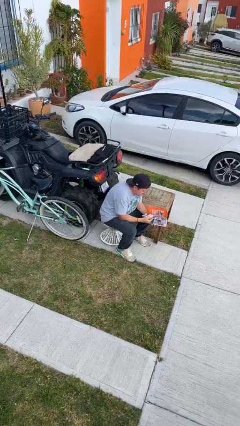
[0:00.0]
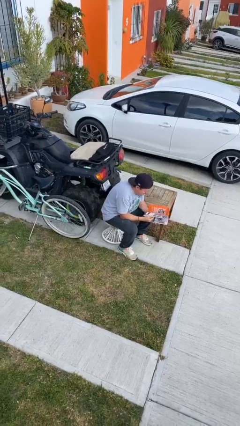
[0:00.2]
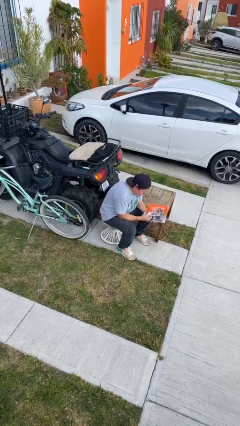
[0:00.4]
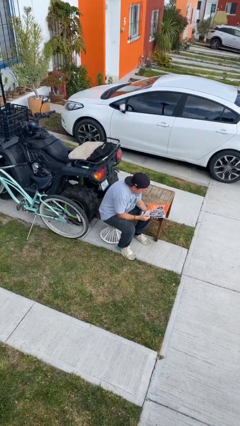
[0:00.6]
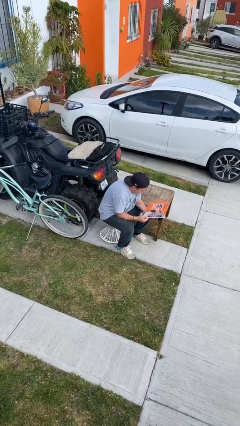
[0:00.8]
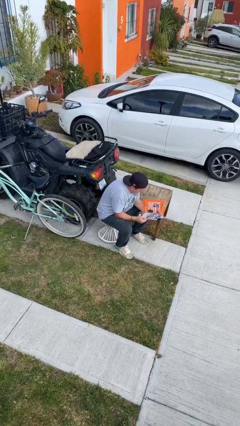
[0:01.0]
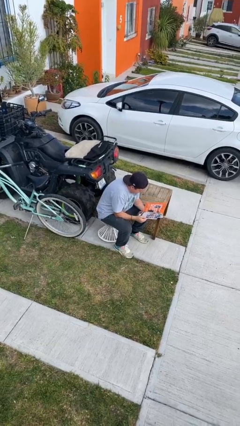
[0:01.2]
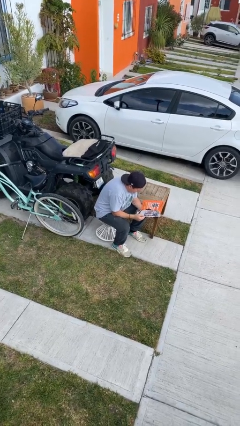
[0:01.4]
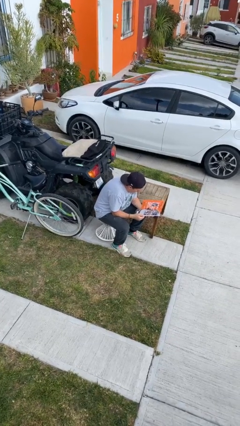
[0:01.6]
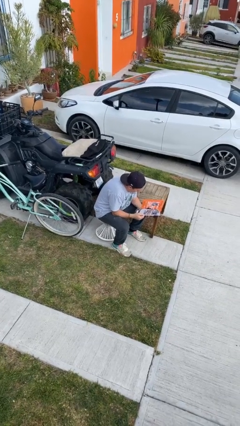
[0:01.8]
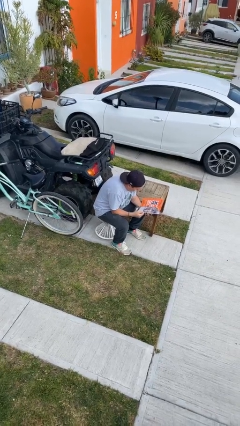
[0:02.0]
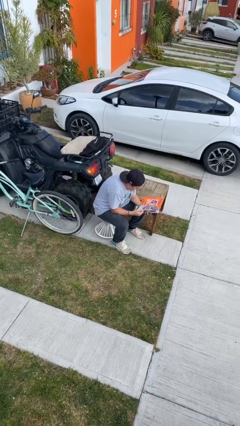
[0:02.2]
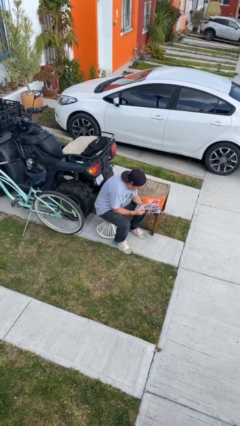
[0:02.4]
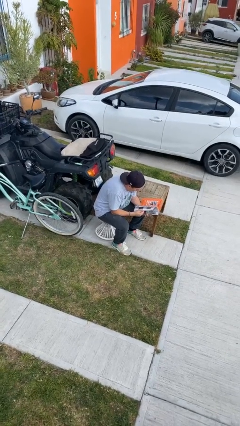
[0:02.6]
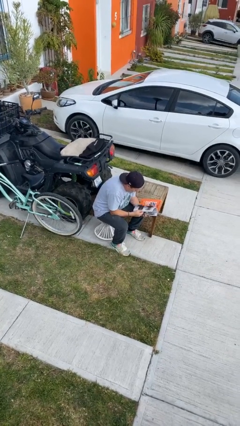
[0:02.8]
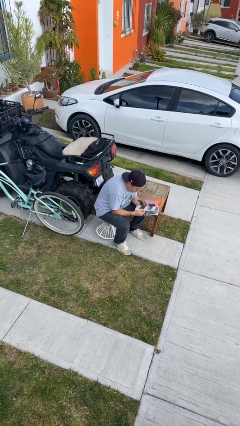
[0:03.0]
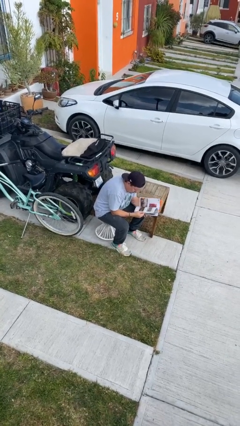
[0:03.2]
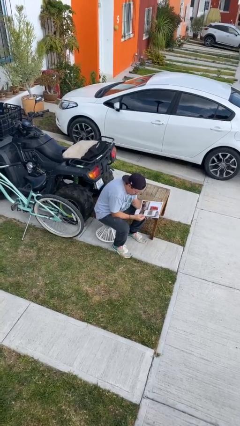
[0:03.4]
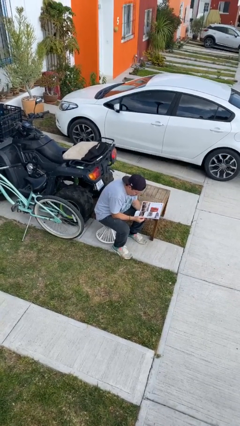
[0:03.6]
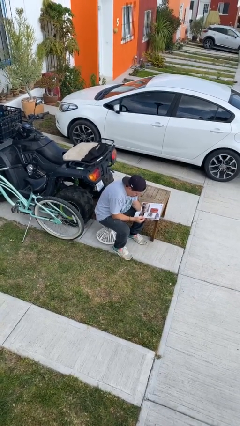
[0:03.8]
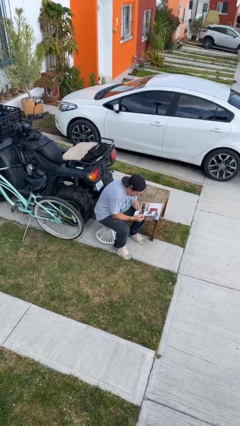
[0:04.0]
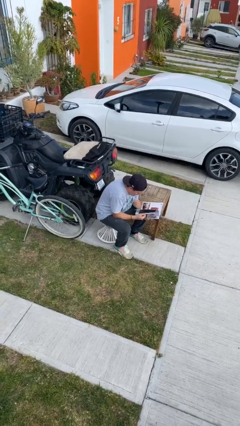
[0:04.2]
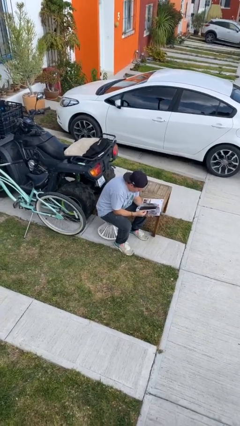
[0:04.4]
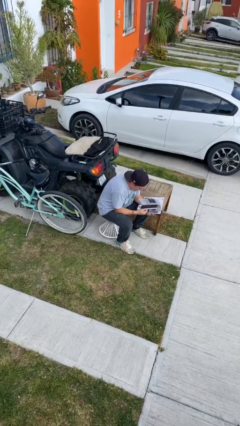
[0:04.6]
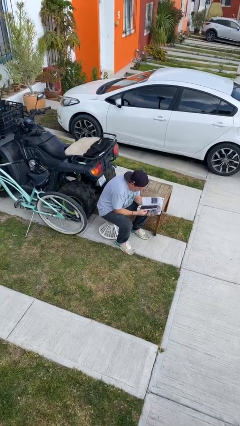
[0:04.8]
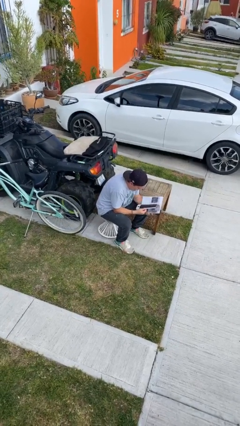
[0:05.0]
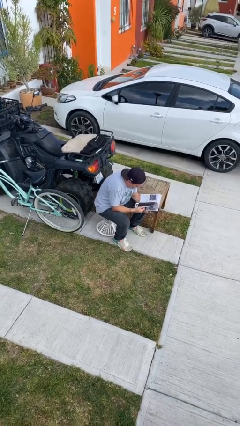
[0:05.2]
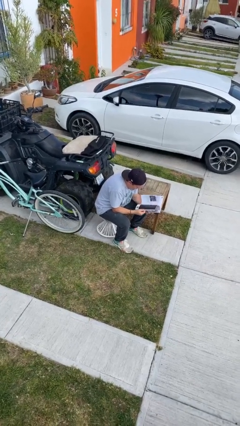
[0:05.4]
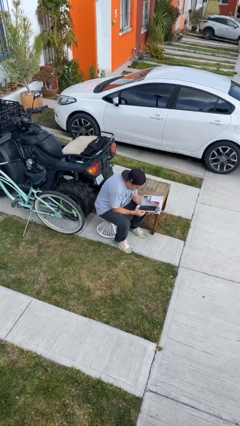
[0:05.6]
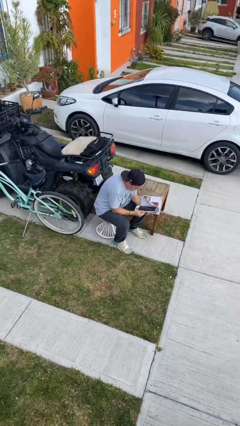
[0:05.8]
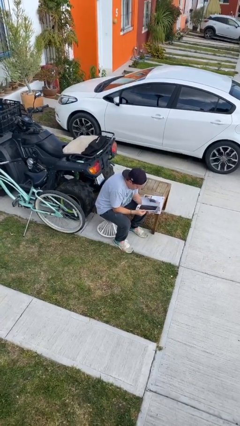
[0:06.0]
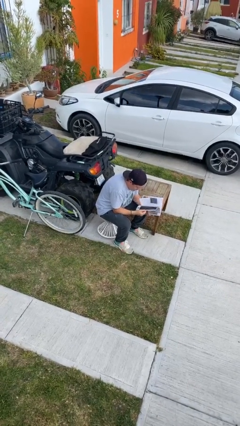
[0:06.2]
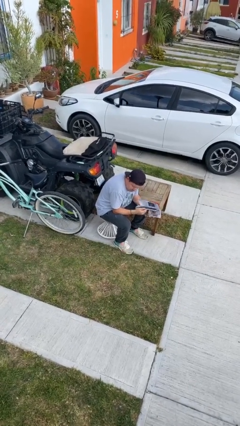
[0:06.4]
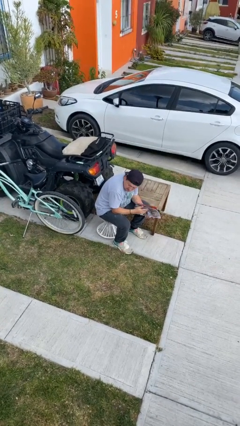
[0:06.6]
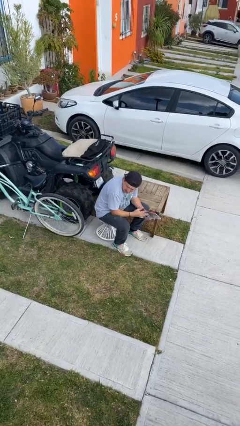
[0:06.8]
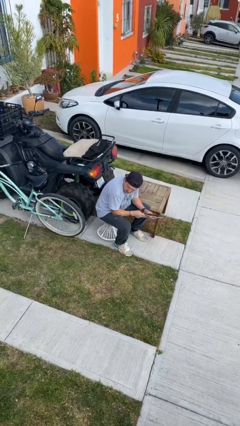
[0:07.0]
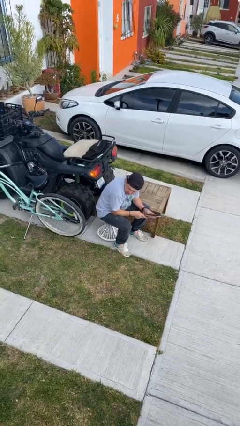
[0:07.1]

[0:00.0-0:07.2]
person reads document

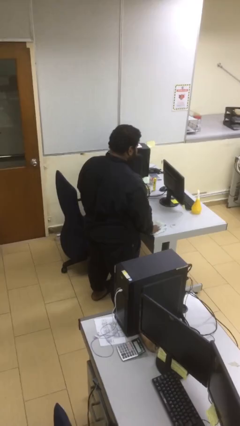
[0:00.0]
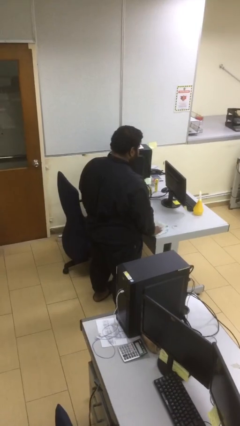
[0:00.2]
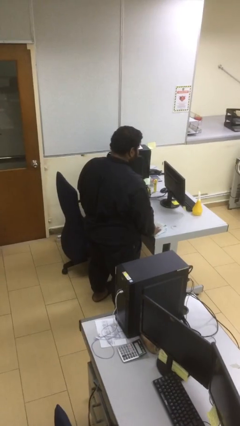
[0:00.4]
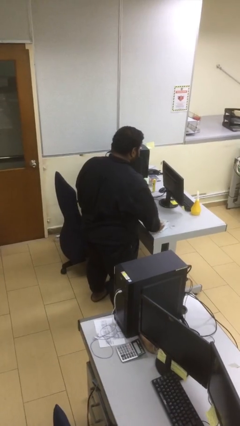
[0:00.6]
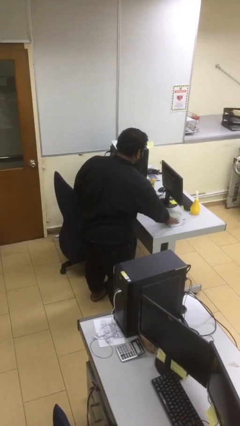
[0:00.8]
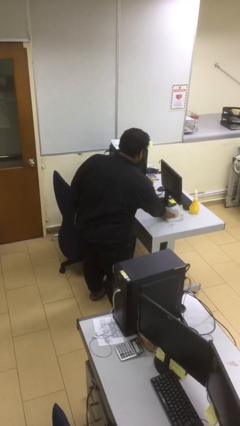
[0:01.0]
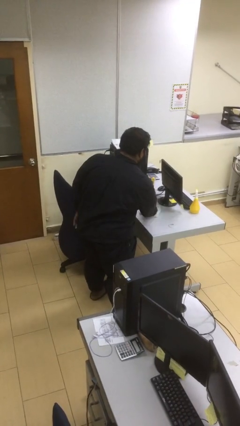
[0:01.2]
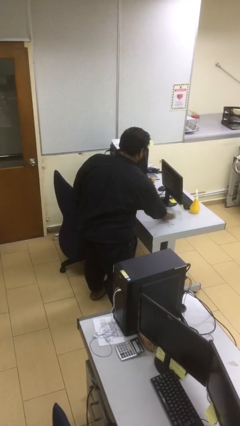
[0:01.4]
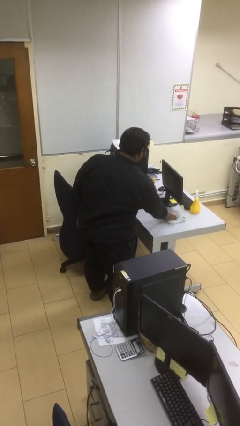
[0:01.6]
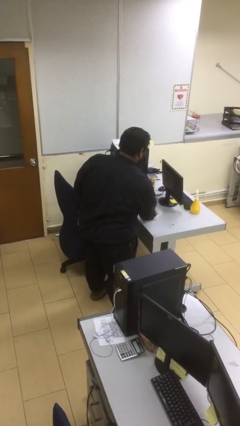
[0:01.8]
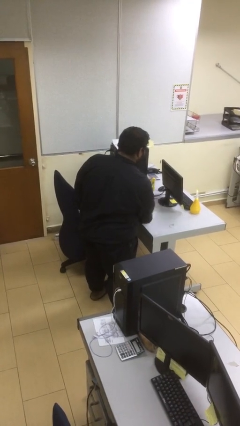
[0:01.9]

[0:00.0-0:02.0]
person cleans table with rag

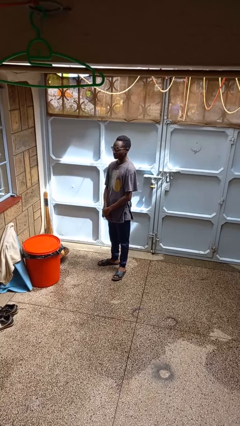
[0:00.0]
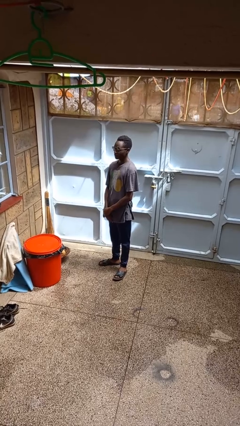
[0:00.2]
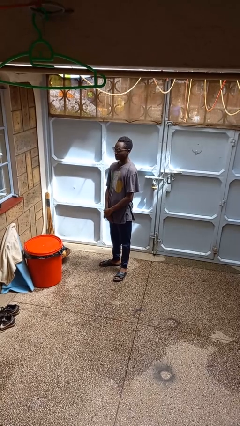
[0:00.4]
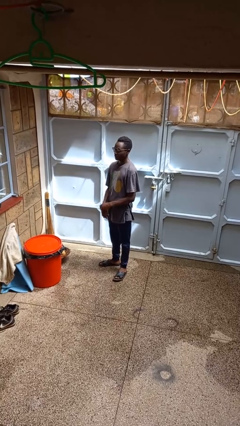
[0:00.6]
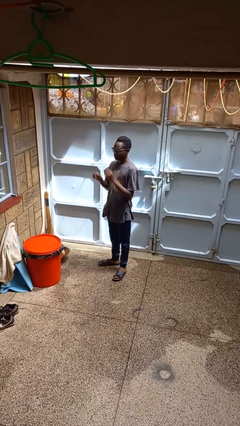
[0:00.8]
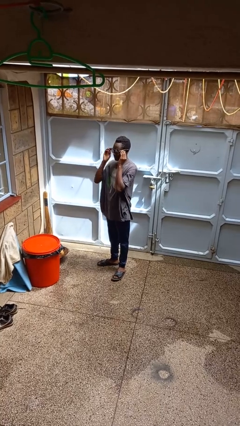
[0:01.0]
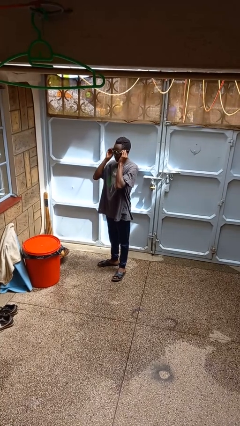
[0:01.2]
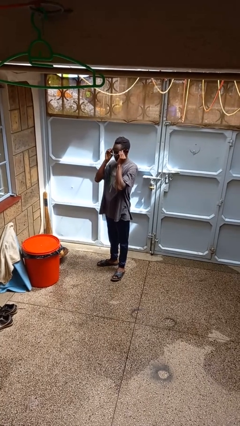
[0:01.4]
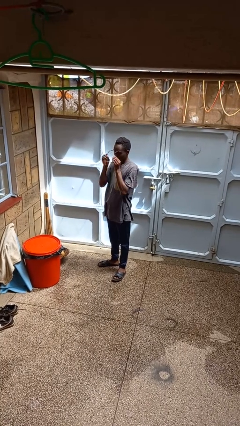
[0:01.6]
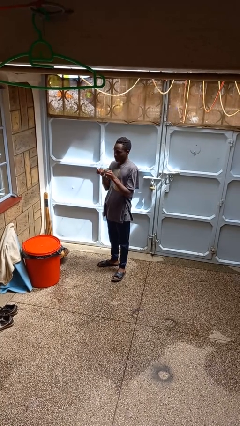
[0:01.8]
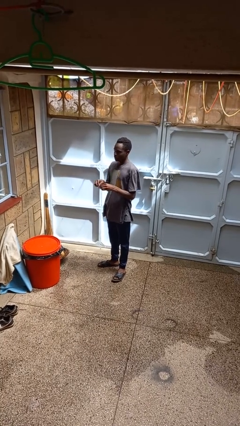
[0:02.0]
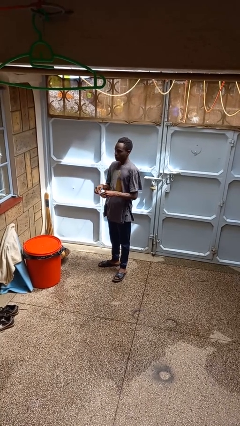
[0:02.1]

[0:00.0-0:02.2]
person takes off glasses

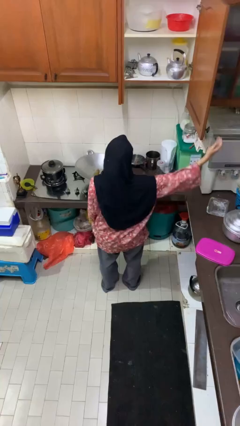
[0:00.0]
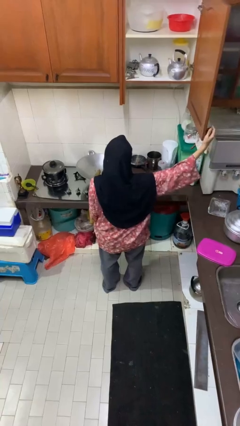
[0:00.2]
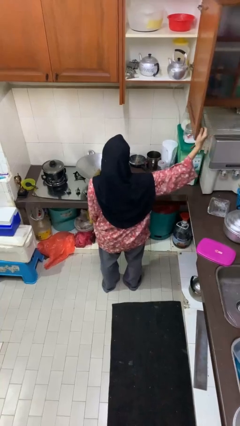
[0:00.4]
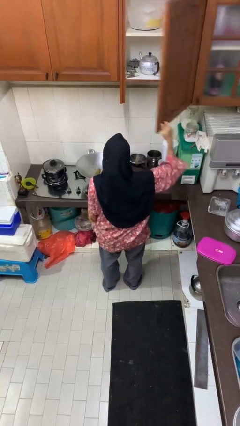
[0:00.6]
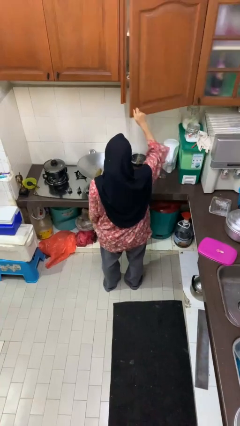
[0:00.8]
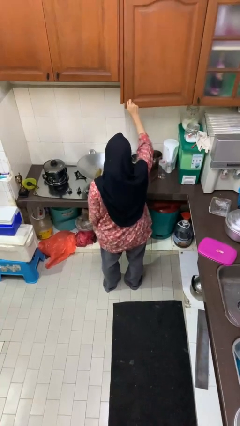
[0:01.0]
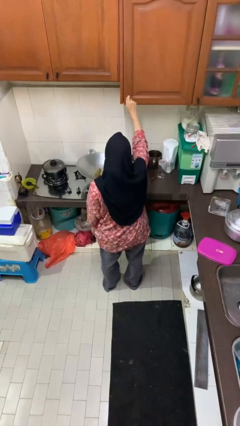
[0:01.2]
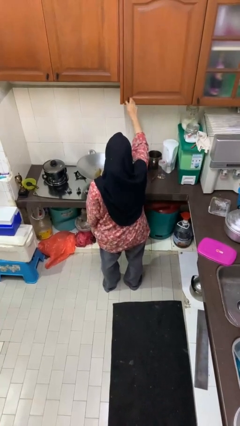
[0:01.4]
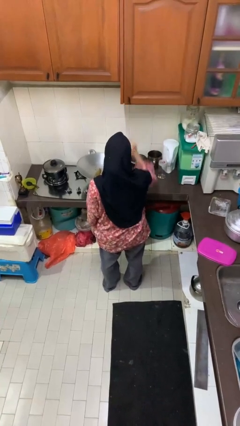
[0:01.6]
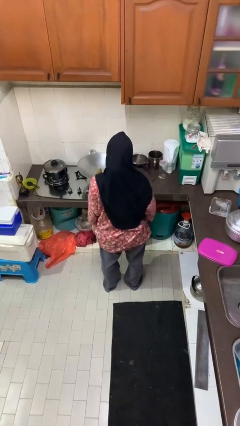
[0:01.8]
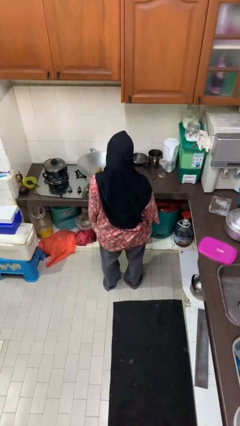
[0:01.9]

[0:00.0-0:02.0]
person closes cabinet

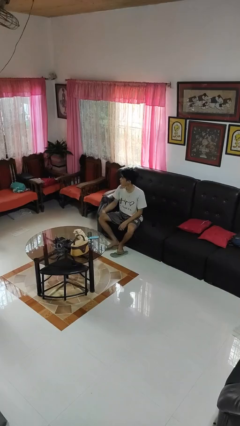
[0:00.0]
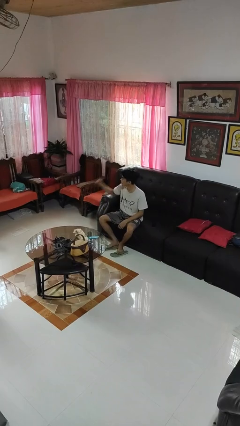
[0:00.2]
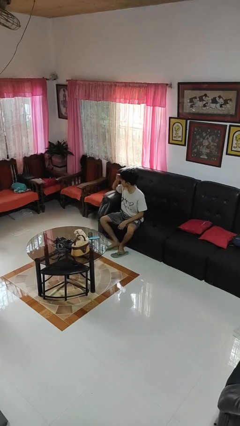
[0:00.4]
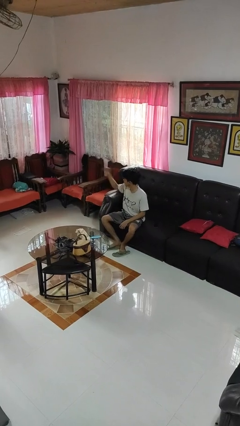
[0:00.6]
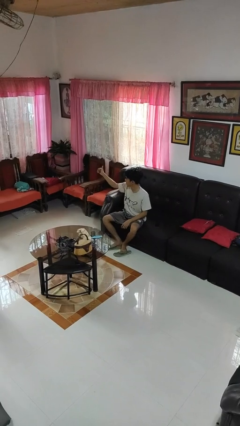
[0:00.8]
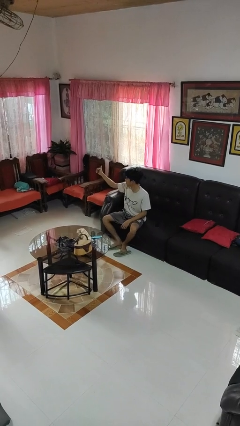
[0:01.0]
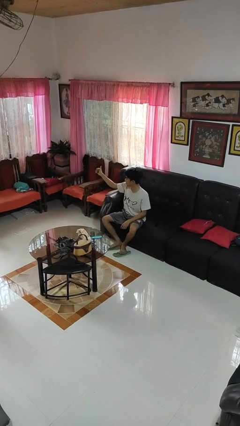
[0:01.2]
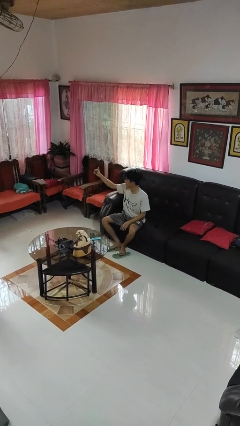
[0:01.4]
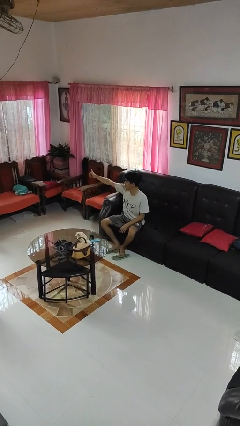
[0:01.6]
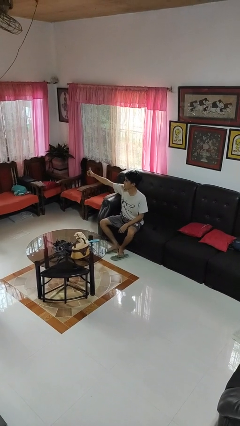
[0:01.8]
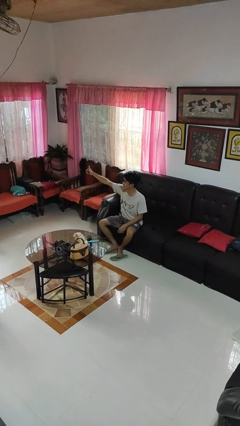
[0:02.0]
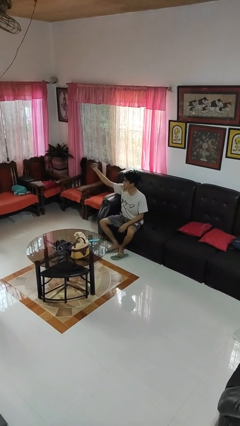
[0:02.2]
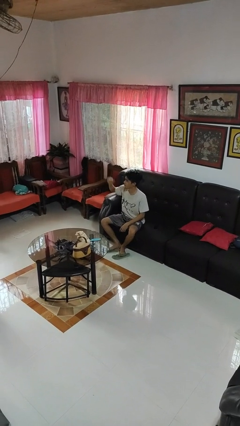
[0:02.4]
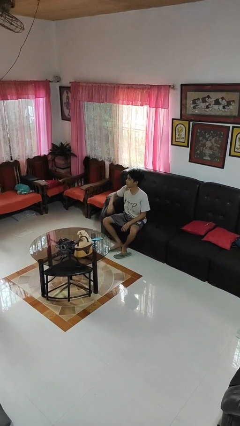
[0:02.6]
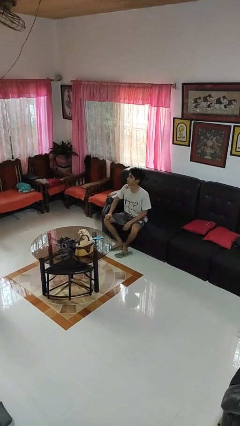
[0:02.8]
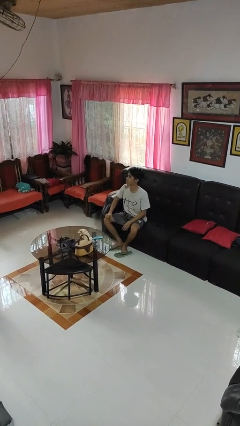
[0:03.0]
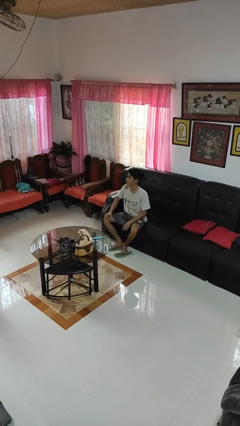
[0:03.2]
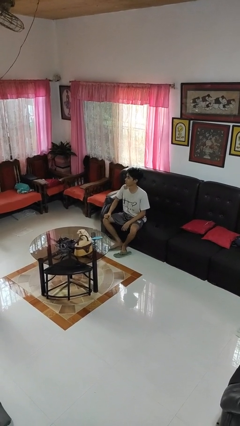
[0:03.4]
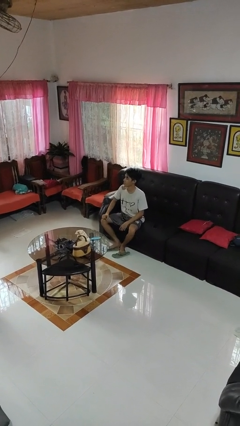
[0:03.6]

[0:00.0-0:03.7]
person gestures thumbs up

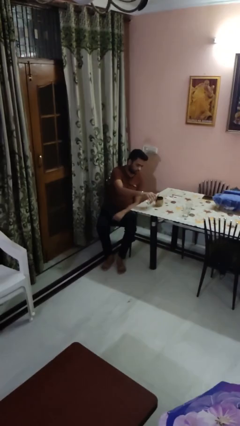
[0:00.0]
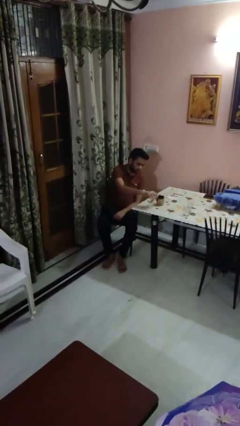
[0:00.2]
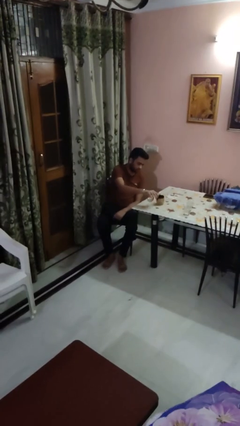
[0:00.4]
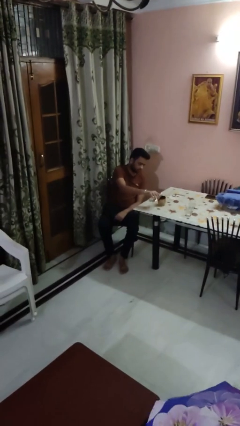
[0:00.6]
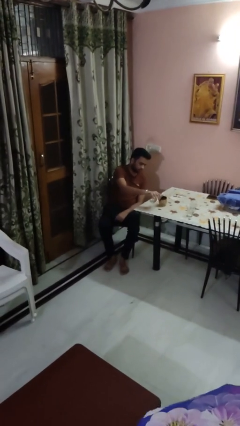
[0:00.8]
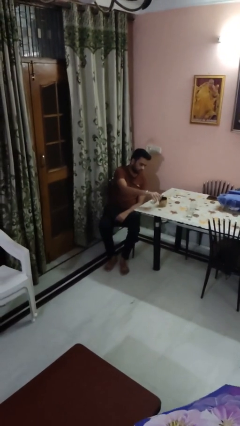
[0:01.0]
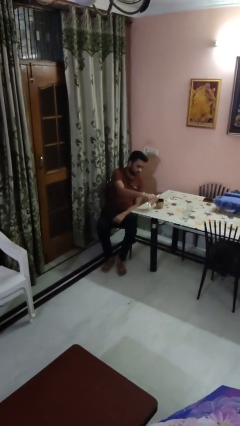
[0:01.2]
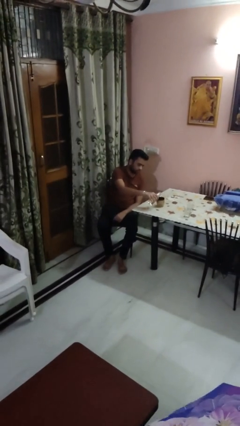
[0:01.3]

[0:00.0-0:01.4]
person pours liquid into cup
